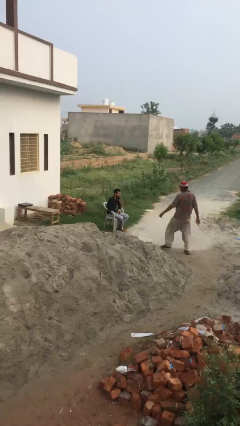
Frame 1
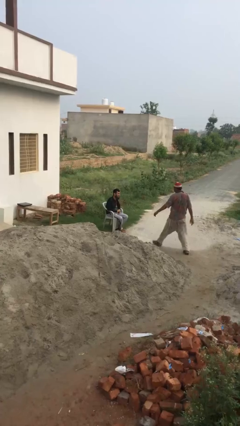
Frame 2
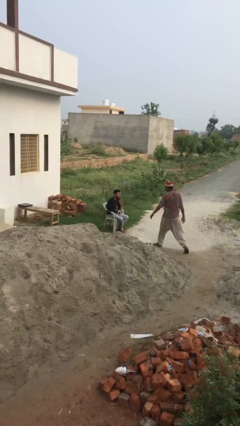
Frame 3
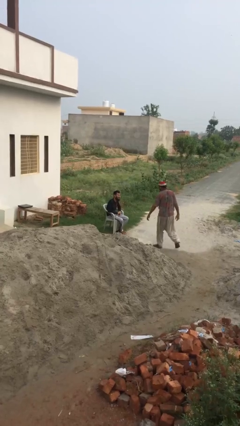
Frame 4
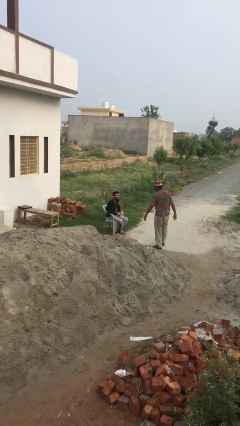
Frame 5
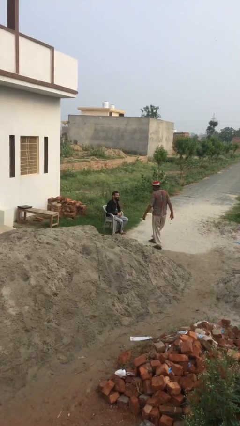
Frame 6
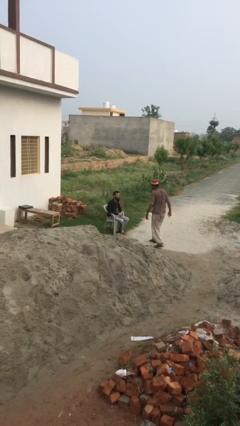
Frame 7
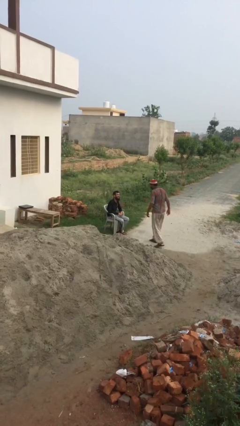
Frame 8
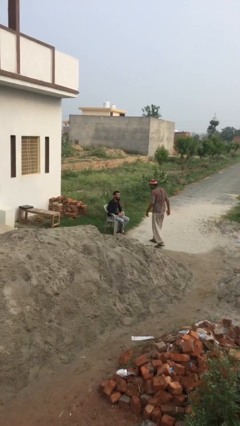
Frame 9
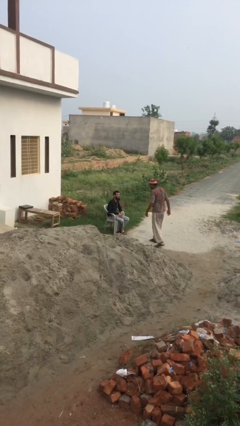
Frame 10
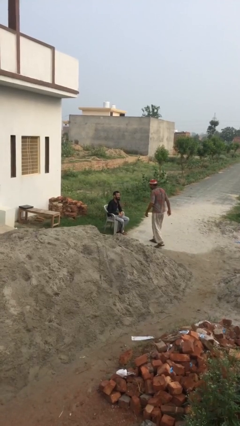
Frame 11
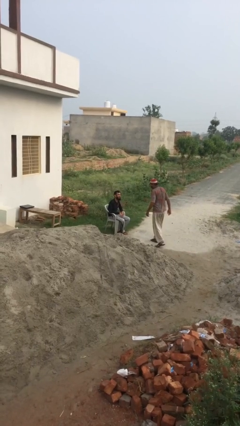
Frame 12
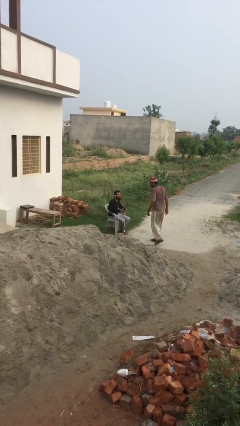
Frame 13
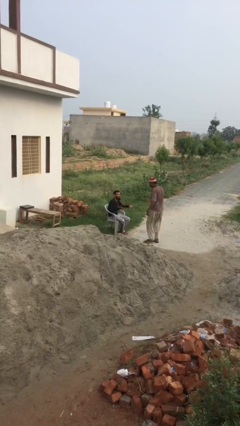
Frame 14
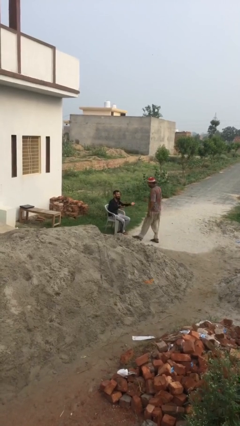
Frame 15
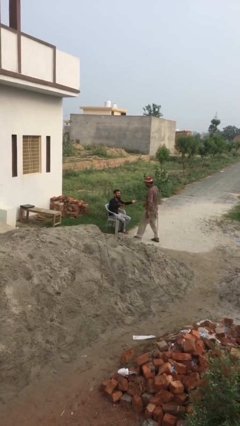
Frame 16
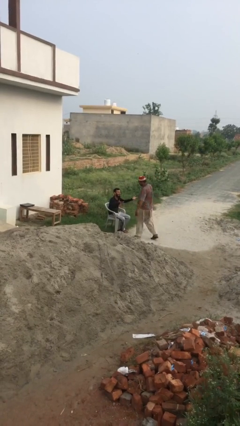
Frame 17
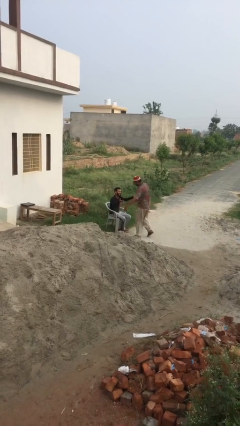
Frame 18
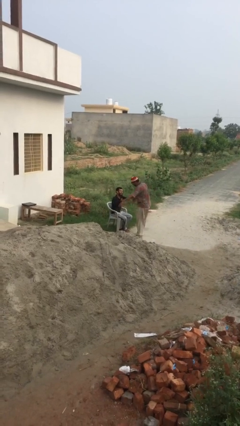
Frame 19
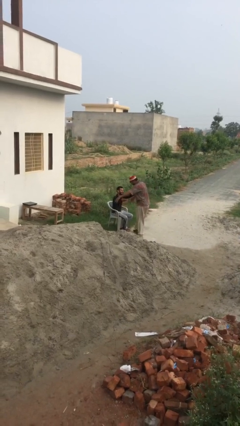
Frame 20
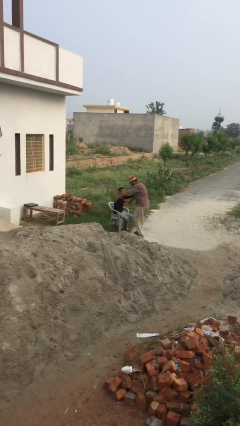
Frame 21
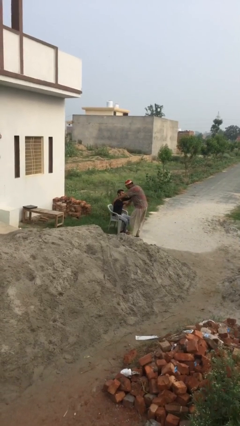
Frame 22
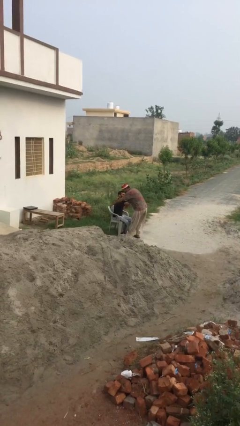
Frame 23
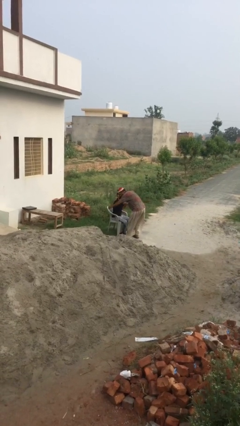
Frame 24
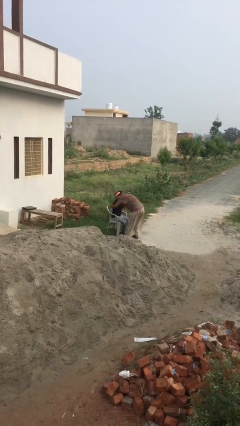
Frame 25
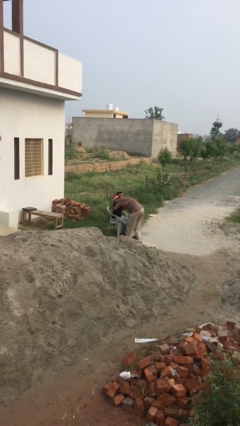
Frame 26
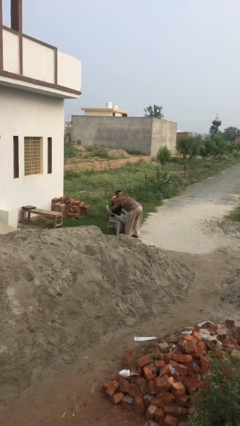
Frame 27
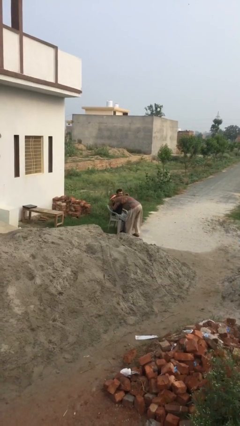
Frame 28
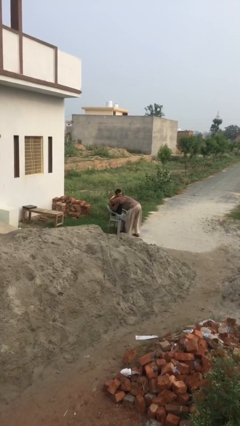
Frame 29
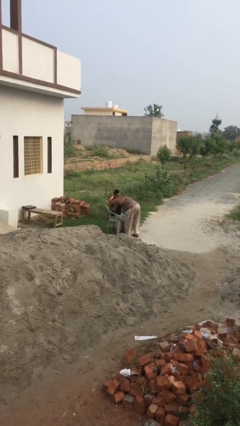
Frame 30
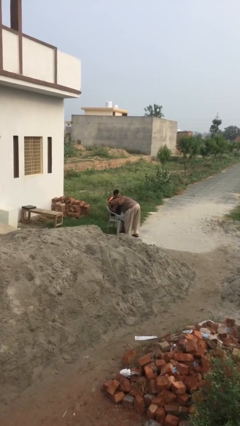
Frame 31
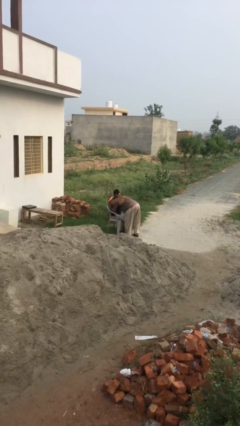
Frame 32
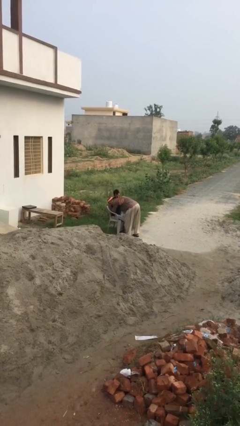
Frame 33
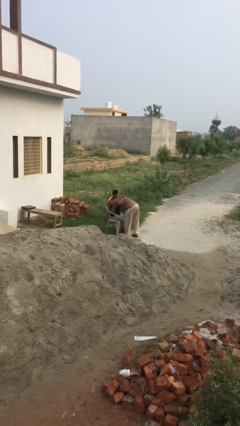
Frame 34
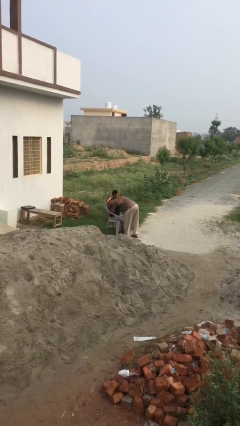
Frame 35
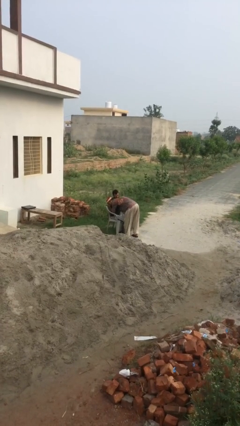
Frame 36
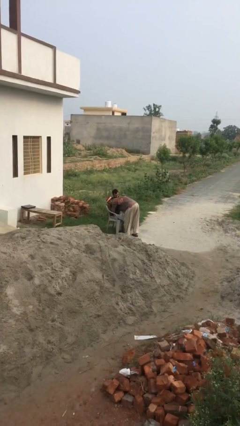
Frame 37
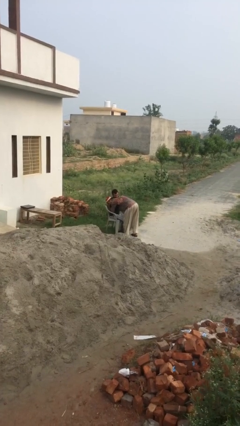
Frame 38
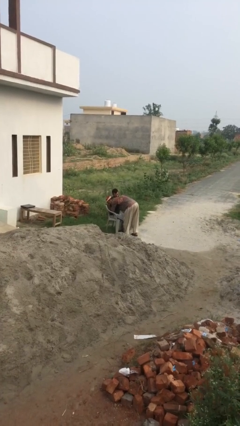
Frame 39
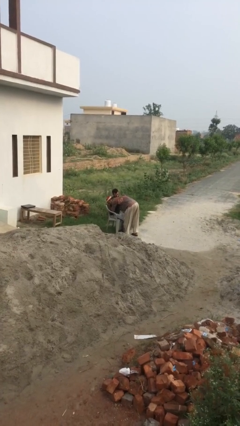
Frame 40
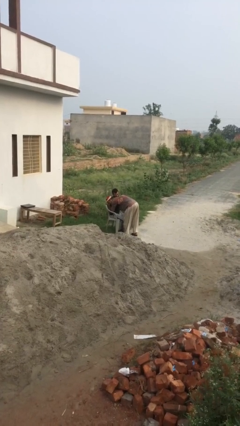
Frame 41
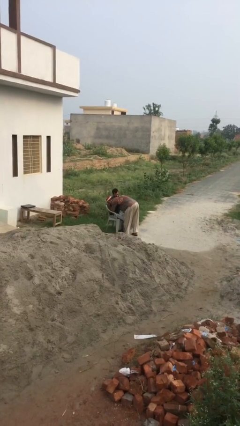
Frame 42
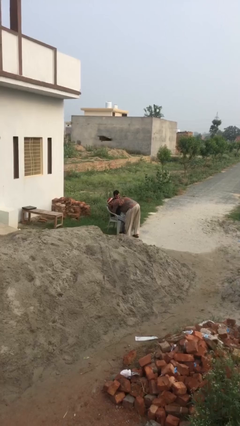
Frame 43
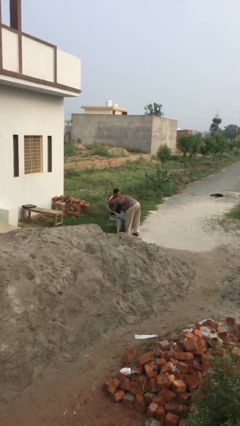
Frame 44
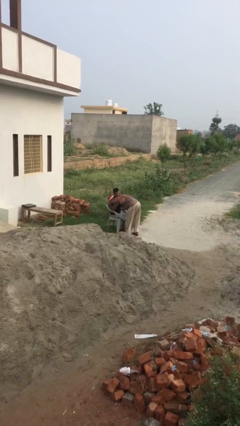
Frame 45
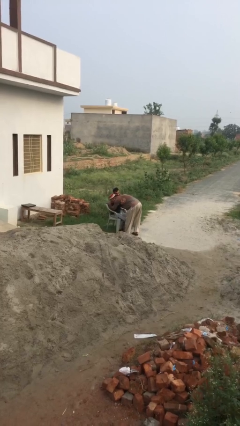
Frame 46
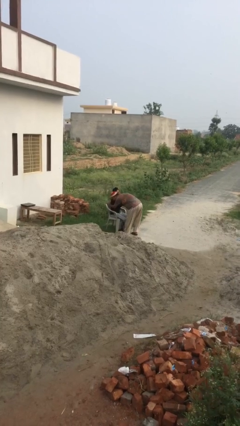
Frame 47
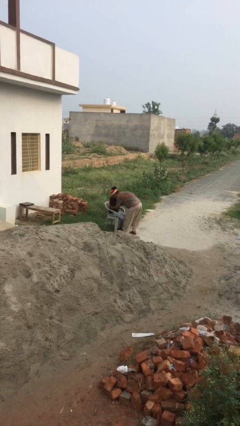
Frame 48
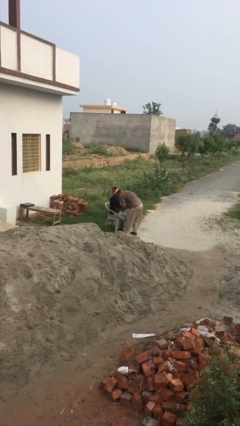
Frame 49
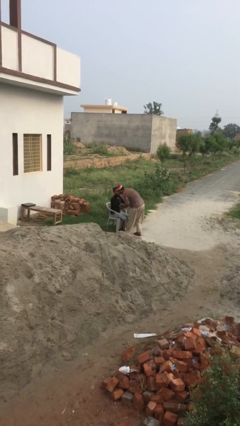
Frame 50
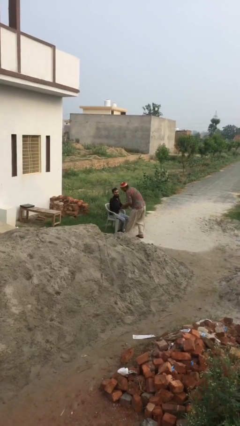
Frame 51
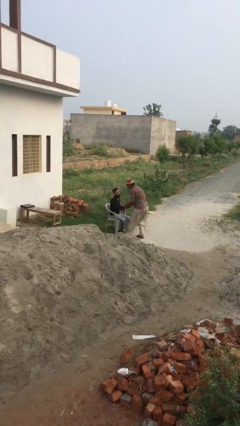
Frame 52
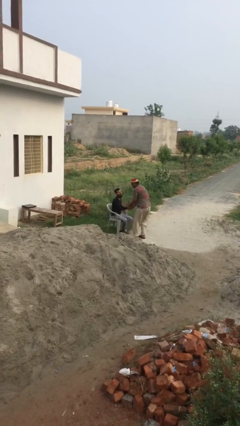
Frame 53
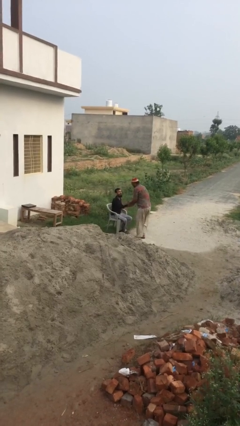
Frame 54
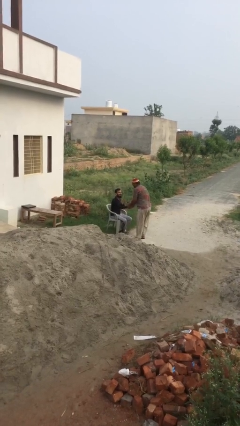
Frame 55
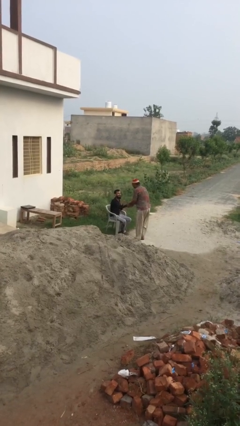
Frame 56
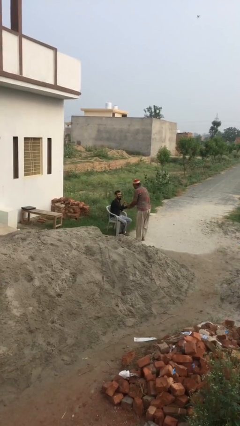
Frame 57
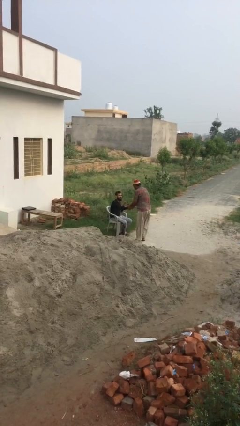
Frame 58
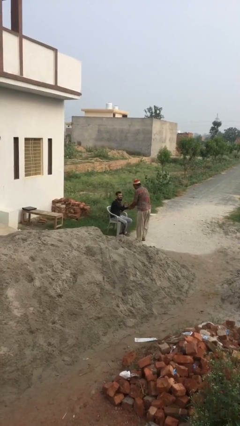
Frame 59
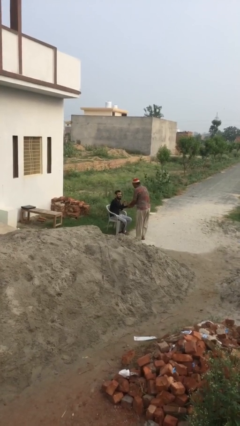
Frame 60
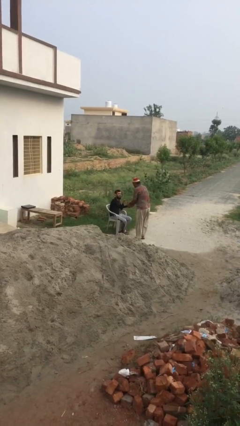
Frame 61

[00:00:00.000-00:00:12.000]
person embraces person

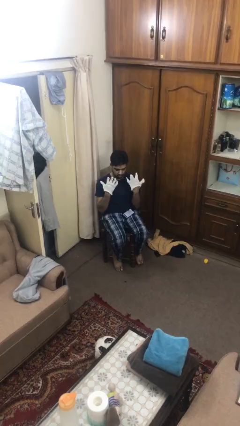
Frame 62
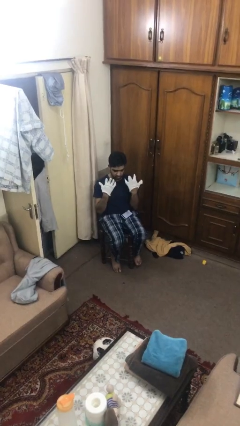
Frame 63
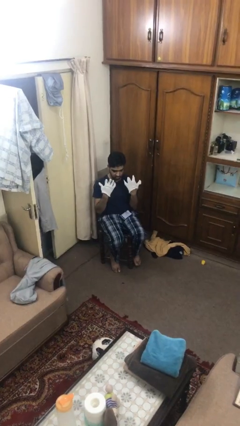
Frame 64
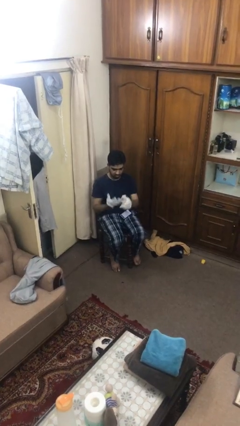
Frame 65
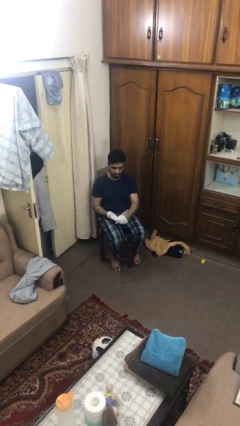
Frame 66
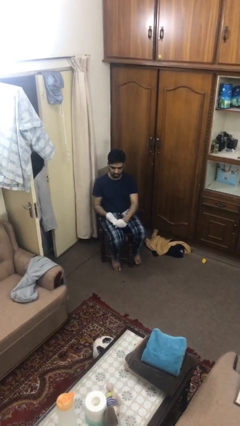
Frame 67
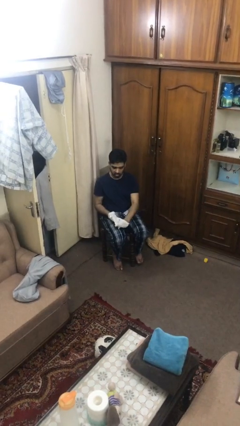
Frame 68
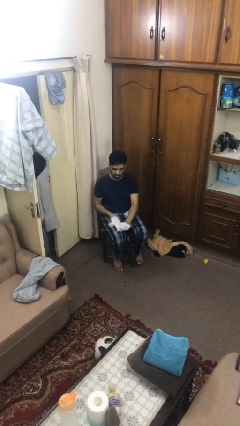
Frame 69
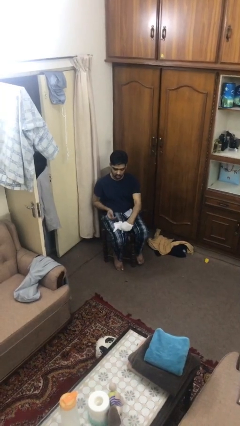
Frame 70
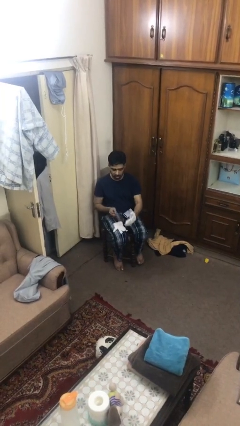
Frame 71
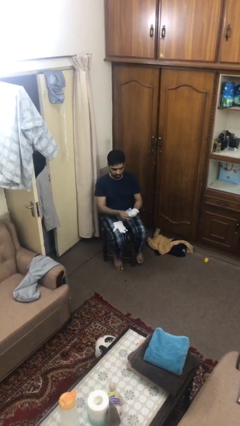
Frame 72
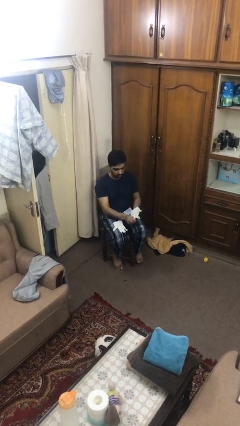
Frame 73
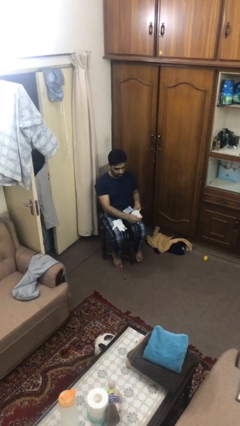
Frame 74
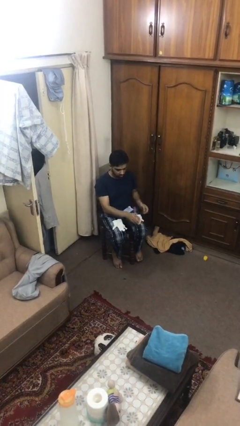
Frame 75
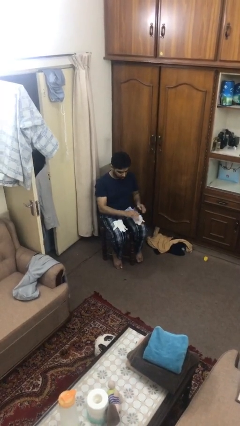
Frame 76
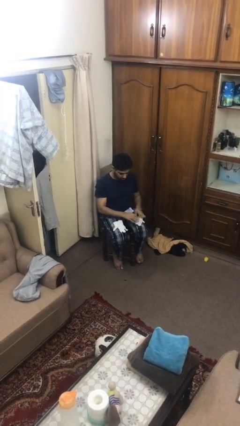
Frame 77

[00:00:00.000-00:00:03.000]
person takes off gloves

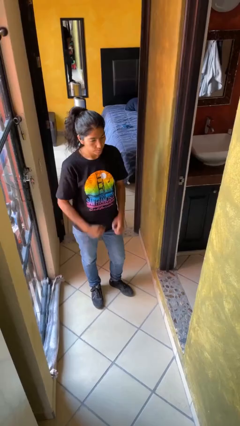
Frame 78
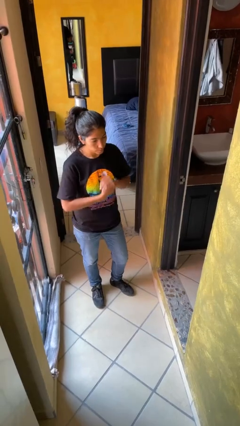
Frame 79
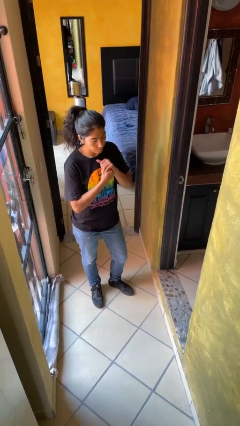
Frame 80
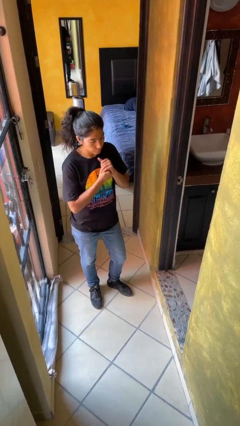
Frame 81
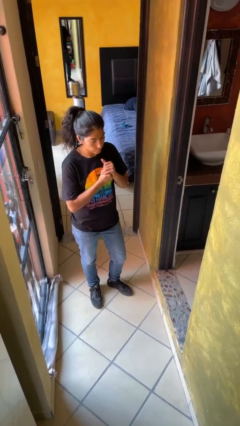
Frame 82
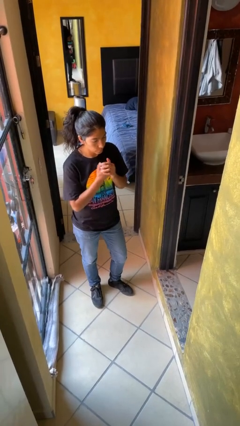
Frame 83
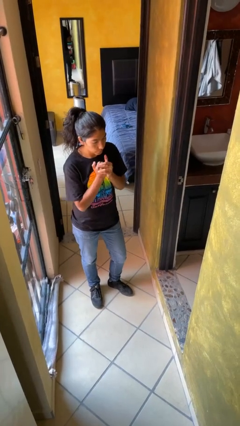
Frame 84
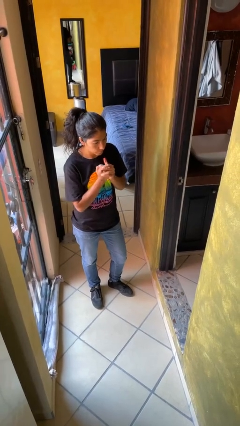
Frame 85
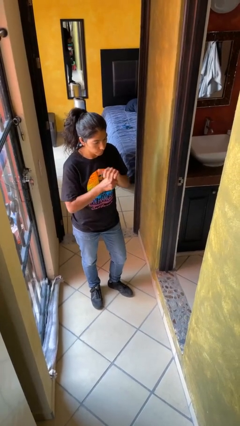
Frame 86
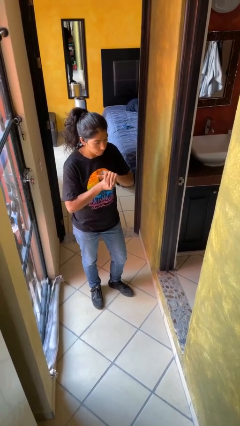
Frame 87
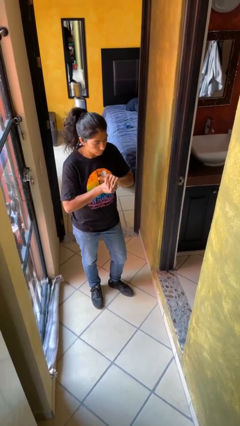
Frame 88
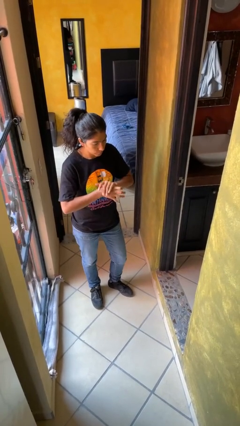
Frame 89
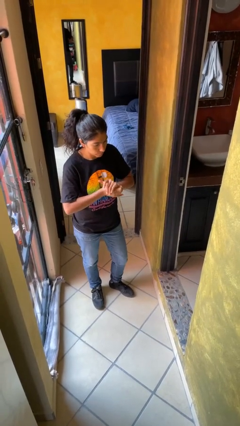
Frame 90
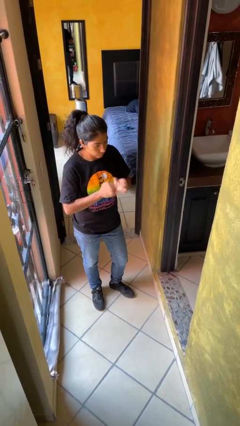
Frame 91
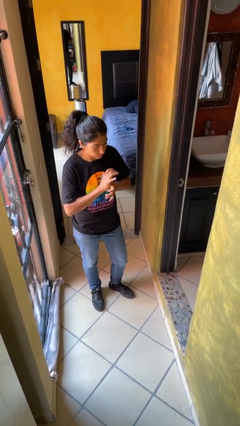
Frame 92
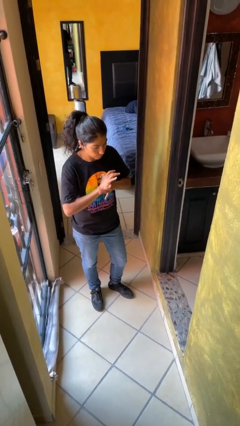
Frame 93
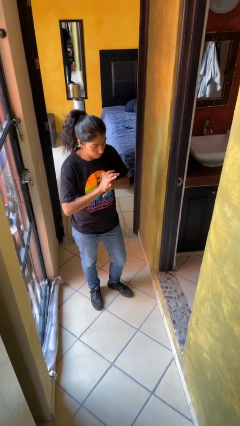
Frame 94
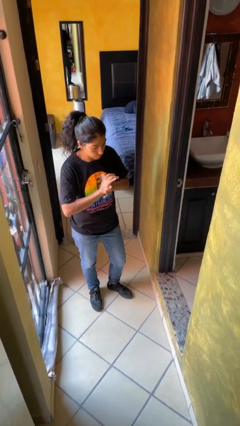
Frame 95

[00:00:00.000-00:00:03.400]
person cracks knuckles
